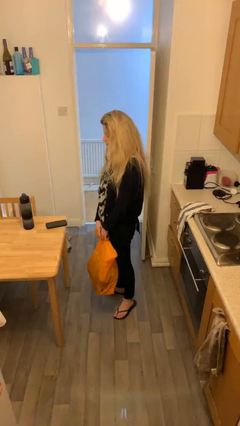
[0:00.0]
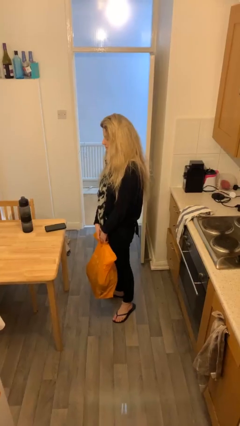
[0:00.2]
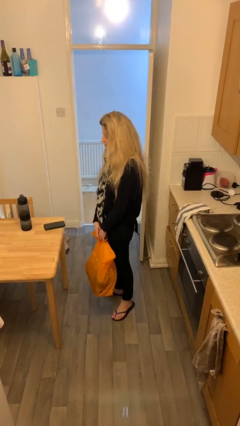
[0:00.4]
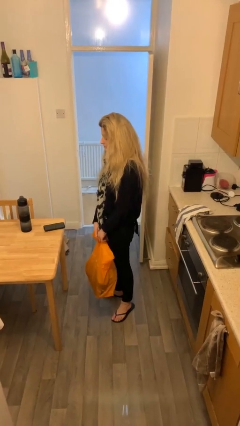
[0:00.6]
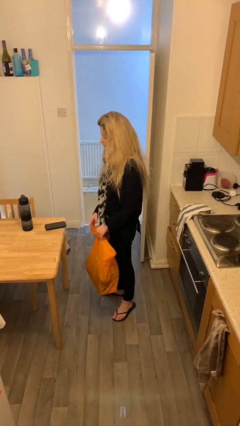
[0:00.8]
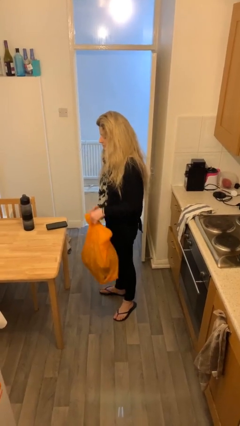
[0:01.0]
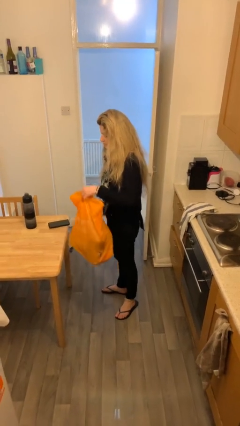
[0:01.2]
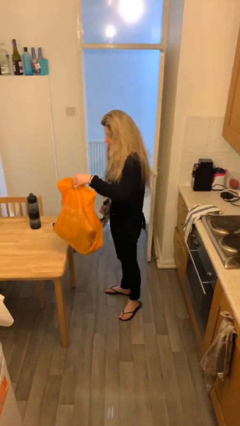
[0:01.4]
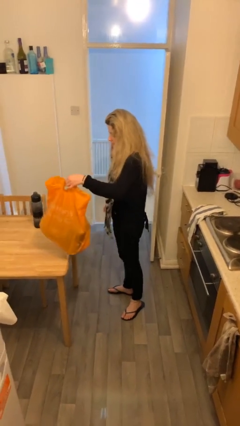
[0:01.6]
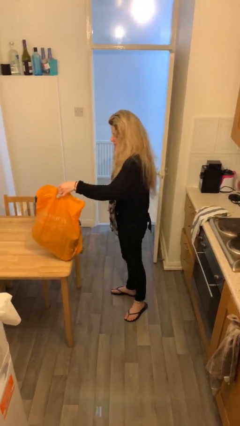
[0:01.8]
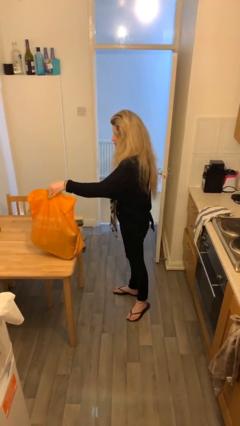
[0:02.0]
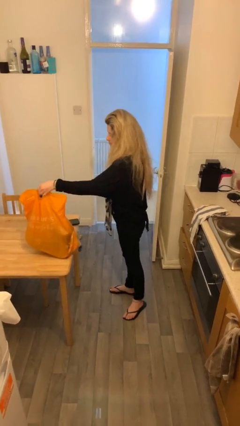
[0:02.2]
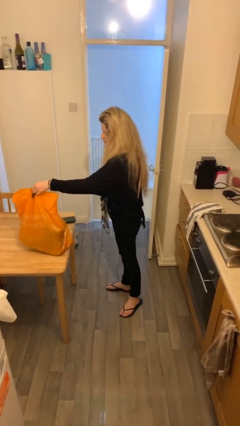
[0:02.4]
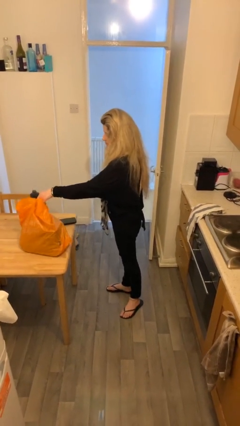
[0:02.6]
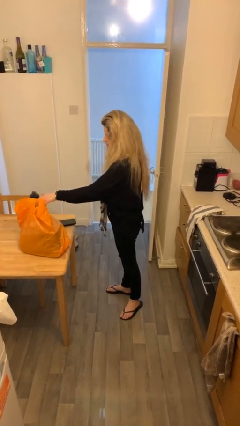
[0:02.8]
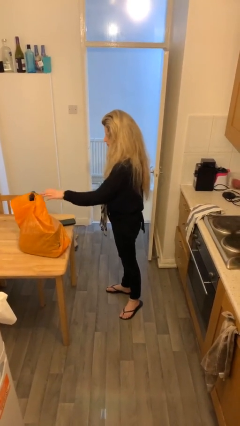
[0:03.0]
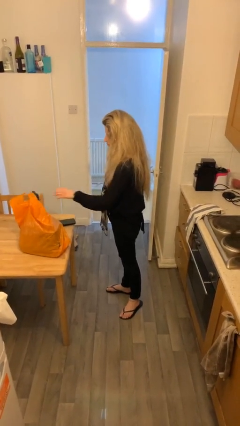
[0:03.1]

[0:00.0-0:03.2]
person puts down object on table

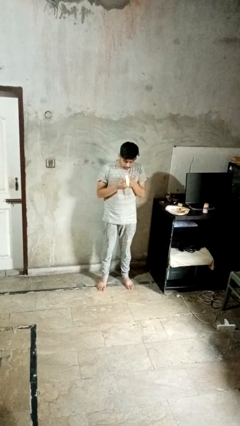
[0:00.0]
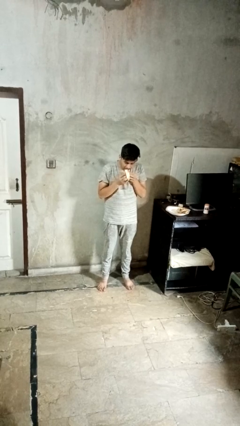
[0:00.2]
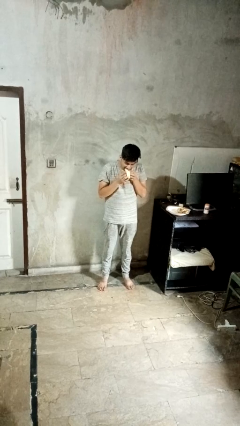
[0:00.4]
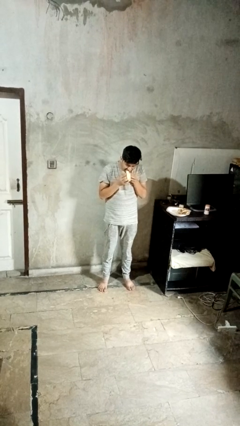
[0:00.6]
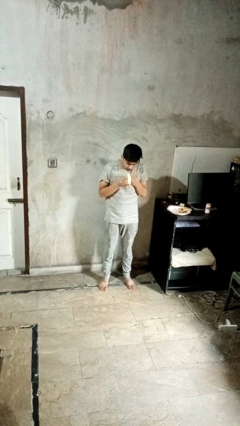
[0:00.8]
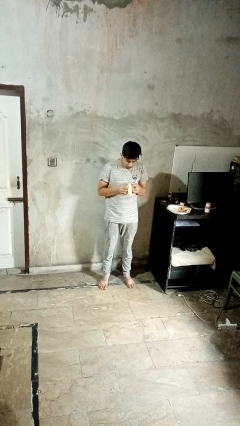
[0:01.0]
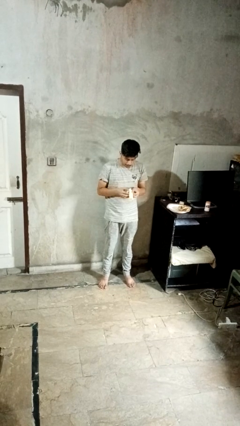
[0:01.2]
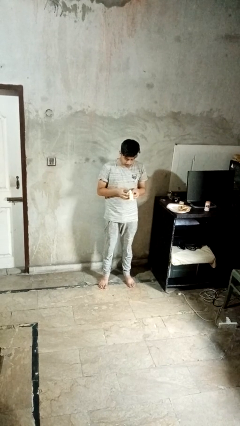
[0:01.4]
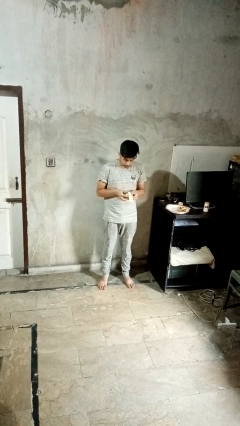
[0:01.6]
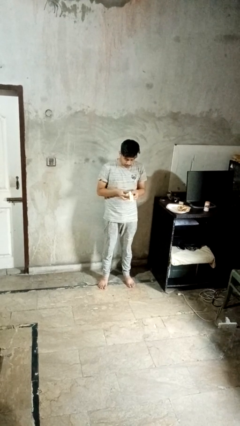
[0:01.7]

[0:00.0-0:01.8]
person eats banana

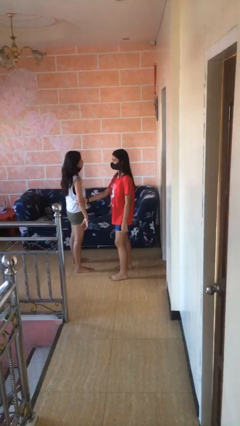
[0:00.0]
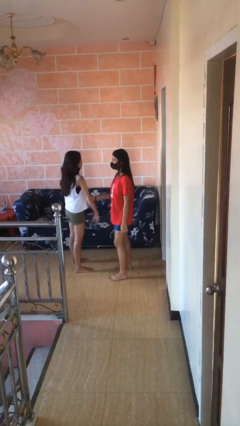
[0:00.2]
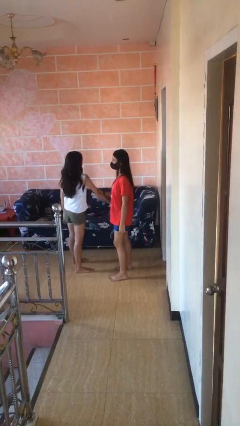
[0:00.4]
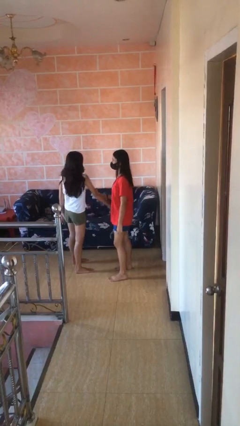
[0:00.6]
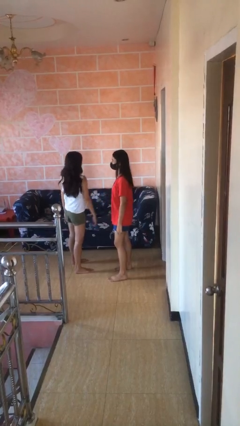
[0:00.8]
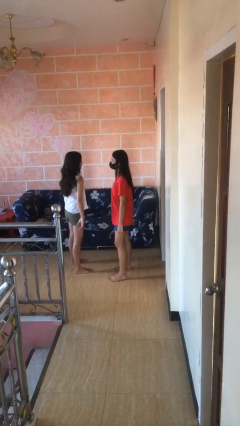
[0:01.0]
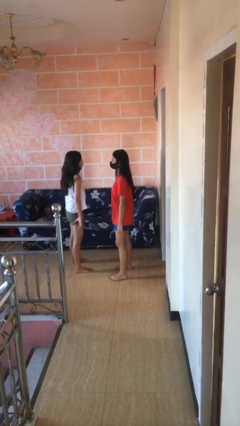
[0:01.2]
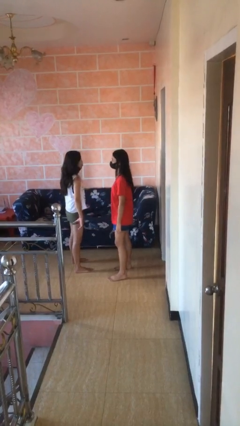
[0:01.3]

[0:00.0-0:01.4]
person grabs person by forearm

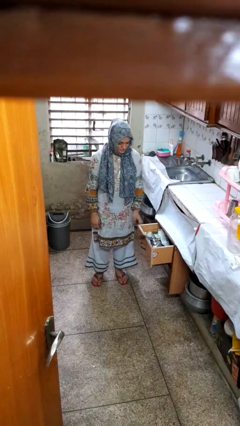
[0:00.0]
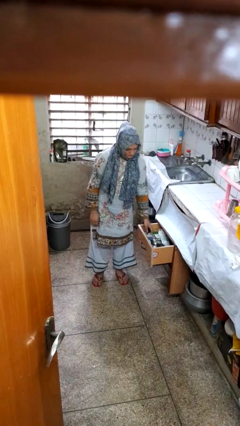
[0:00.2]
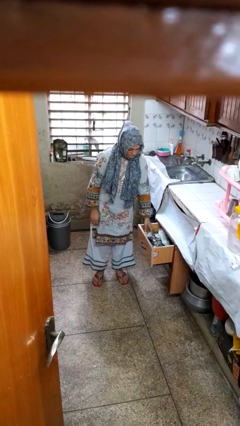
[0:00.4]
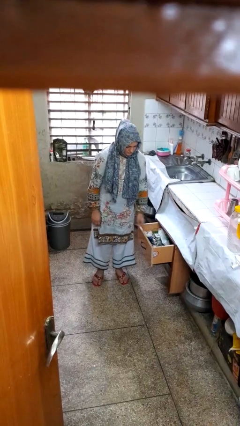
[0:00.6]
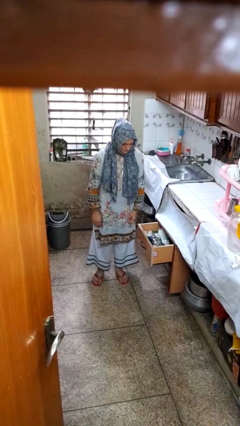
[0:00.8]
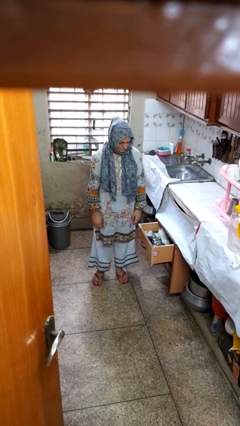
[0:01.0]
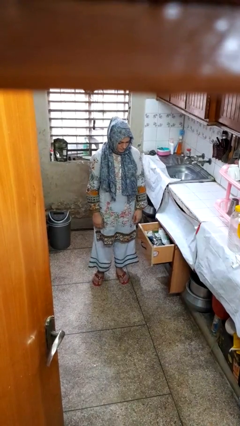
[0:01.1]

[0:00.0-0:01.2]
person puts object into kitchen drawer

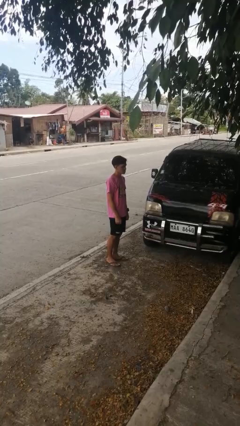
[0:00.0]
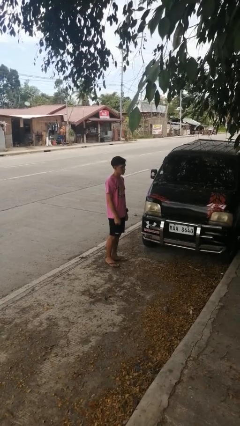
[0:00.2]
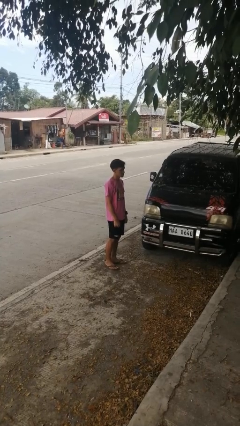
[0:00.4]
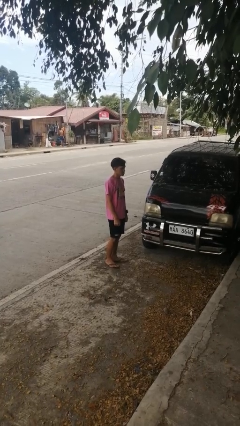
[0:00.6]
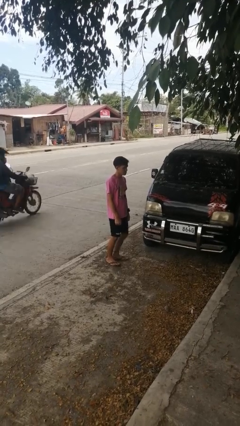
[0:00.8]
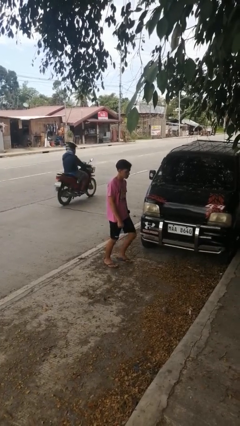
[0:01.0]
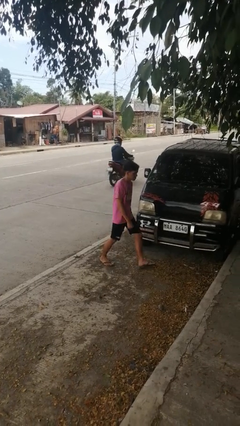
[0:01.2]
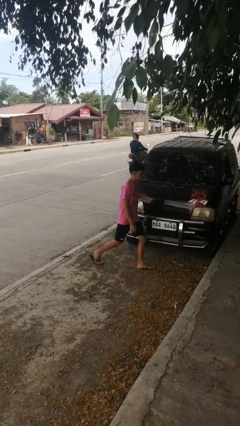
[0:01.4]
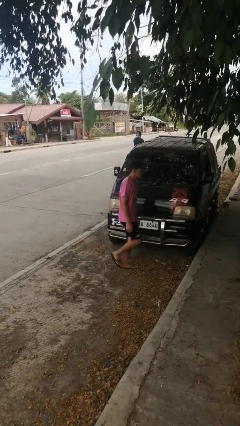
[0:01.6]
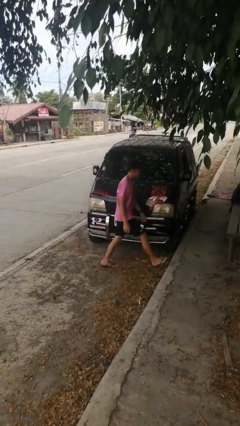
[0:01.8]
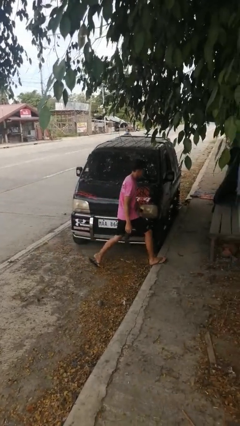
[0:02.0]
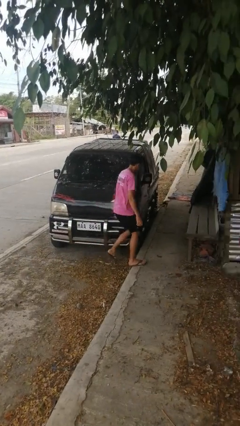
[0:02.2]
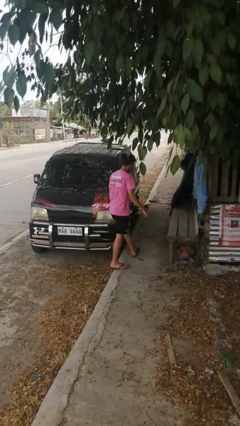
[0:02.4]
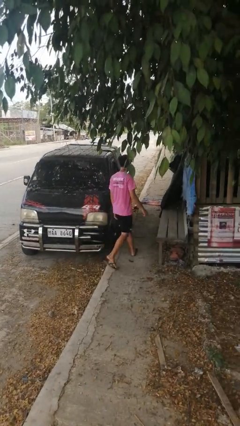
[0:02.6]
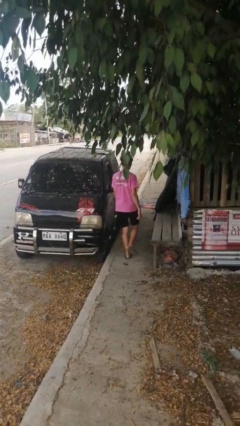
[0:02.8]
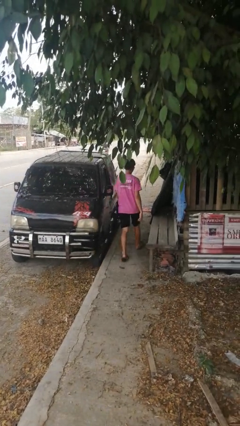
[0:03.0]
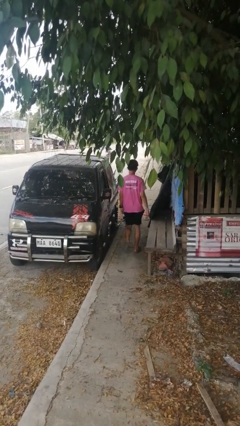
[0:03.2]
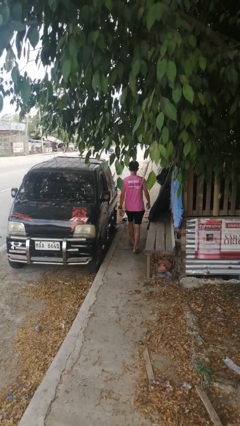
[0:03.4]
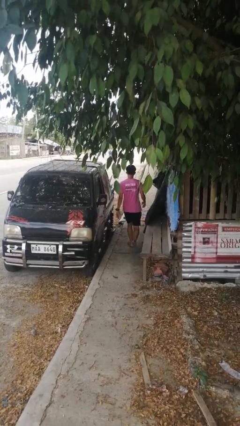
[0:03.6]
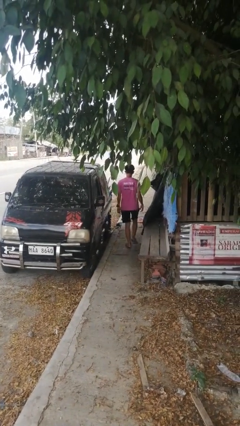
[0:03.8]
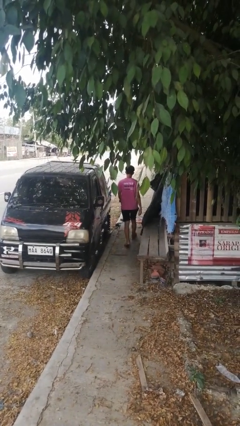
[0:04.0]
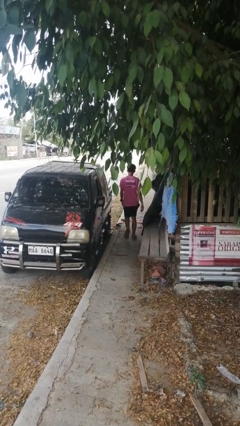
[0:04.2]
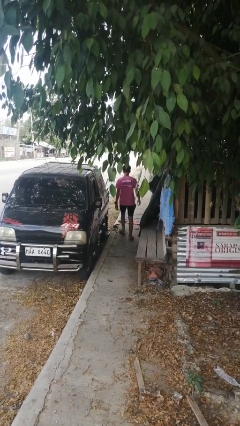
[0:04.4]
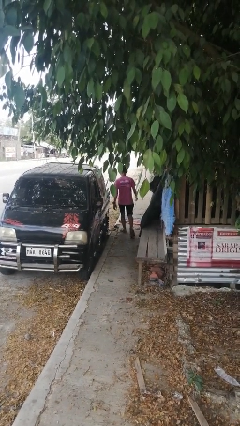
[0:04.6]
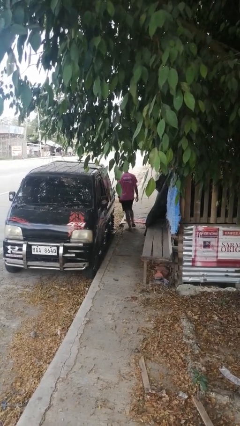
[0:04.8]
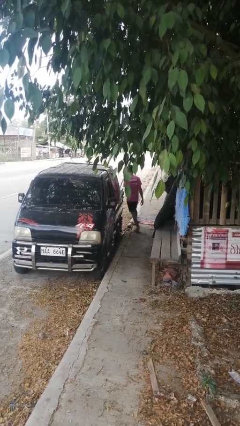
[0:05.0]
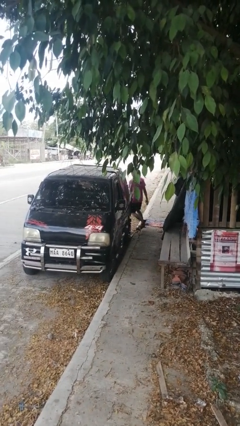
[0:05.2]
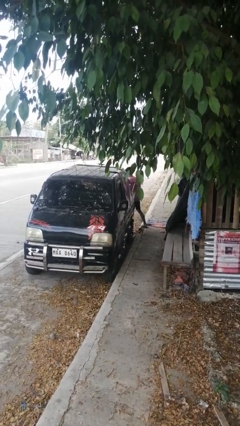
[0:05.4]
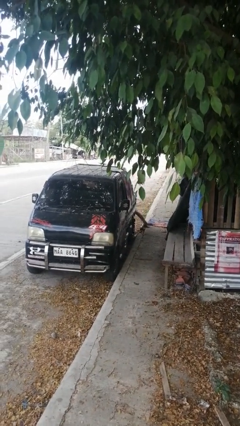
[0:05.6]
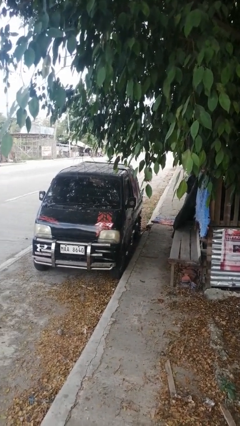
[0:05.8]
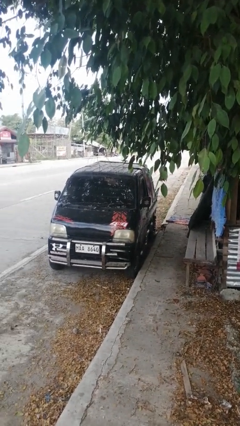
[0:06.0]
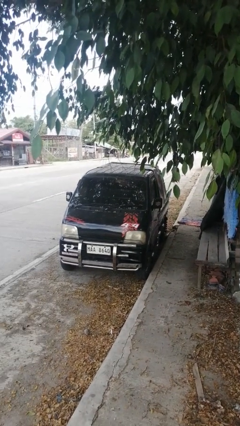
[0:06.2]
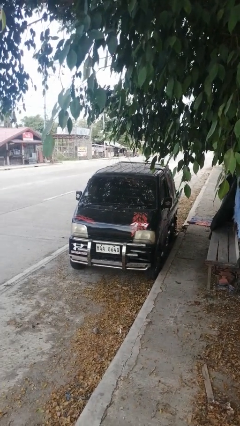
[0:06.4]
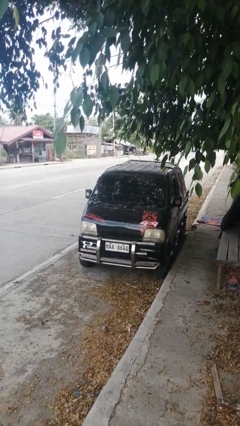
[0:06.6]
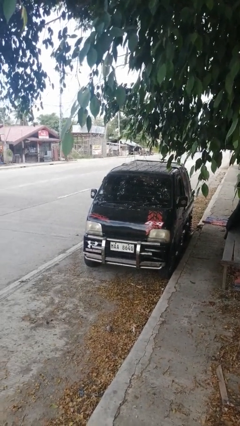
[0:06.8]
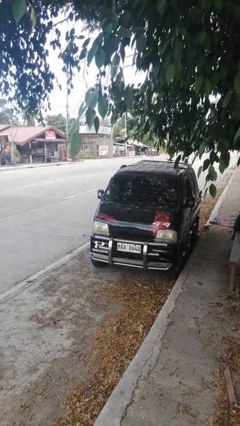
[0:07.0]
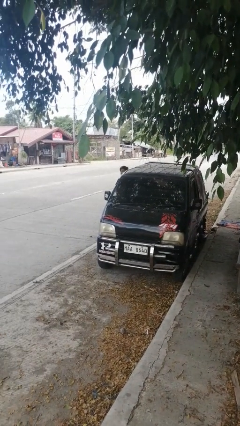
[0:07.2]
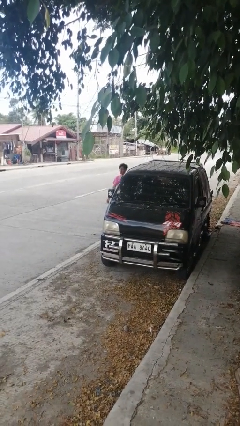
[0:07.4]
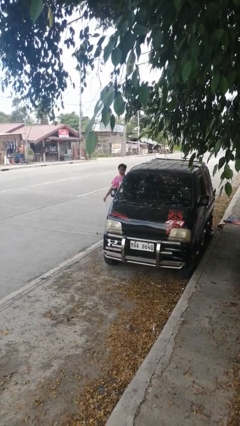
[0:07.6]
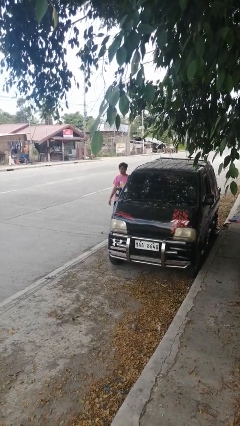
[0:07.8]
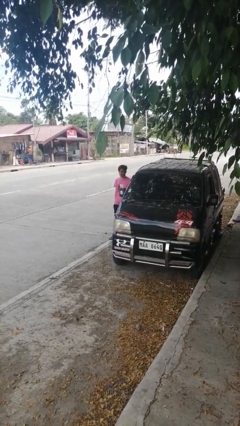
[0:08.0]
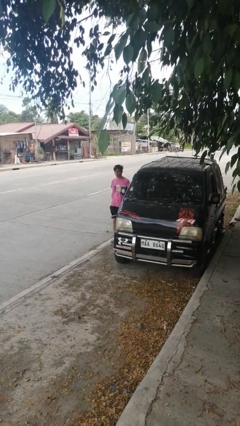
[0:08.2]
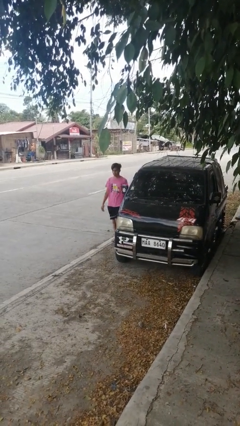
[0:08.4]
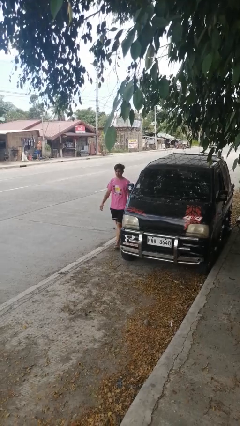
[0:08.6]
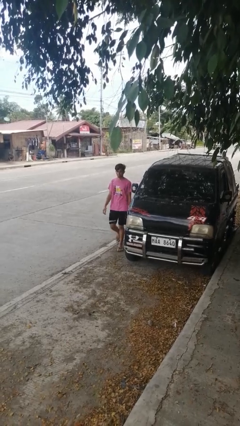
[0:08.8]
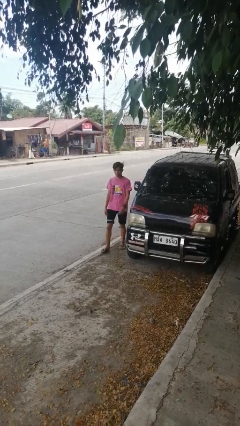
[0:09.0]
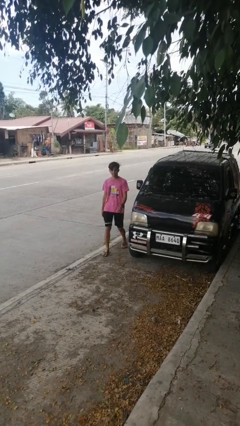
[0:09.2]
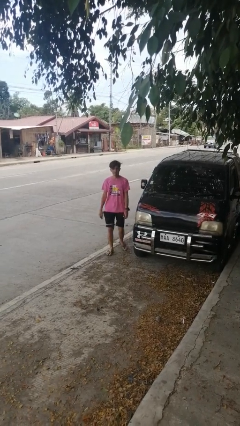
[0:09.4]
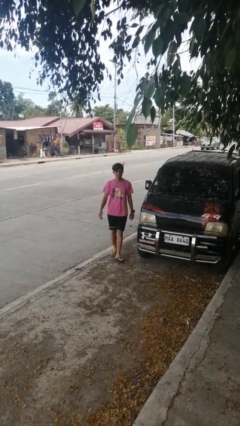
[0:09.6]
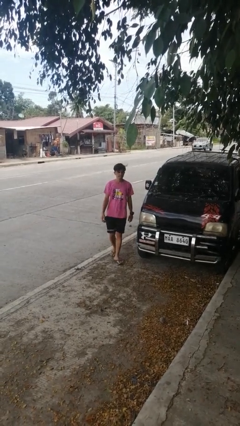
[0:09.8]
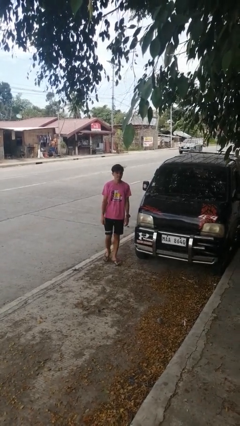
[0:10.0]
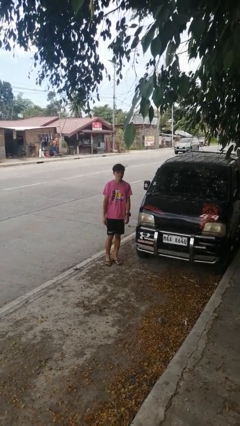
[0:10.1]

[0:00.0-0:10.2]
person walks around car
